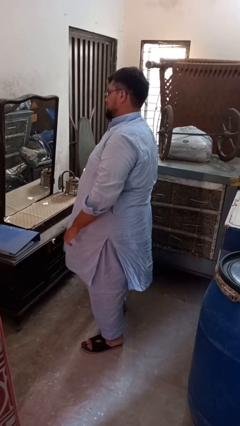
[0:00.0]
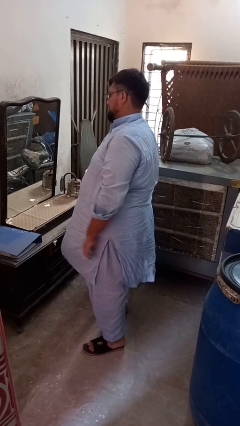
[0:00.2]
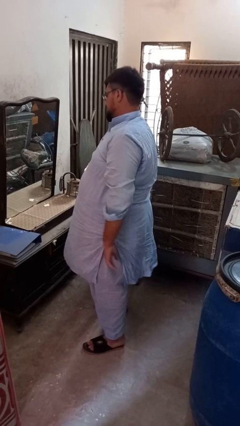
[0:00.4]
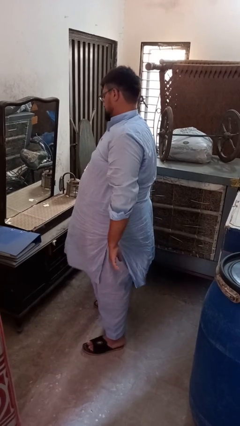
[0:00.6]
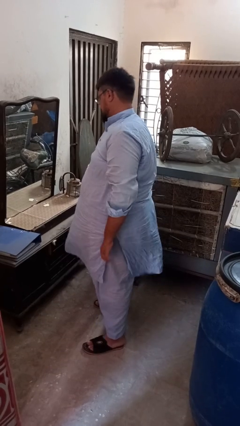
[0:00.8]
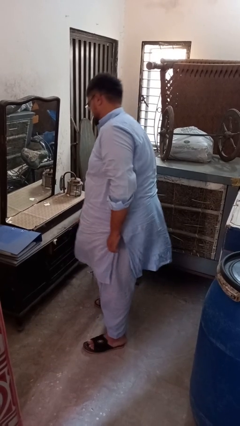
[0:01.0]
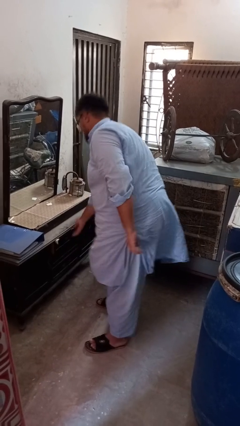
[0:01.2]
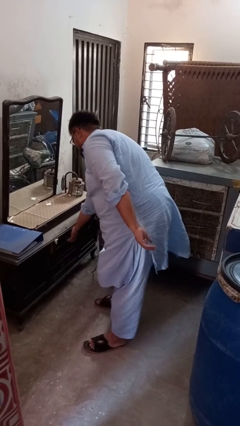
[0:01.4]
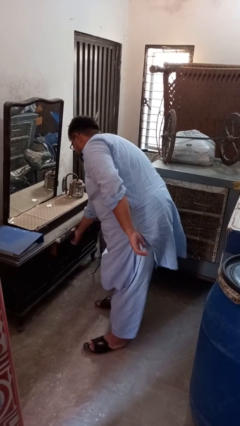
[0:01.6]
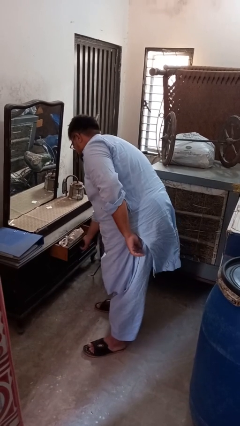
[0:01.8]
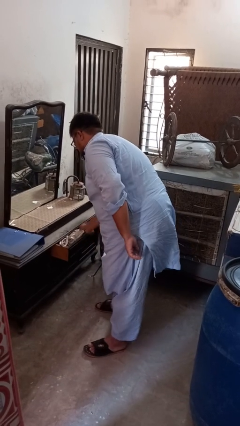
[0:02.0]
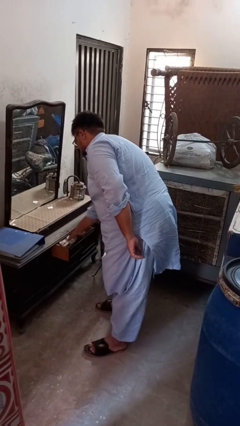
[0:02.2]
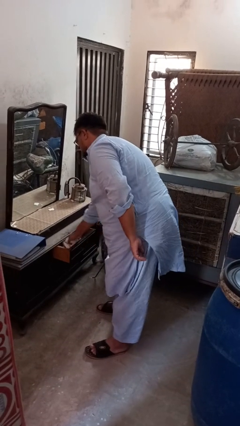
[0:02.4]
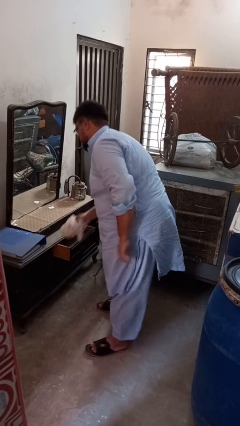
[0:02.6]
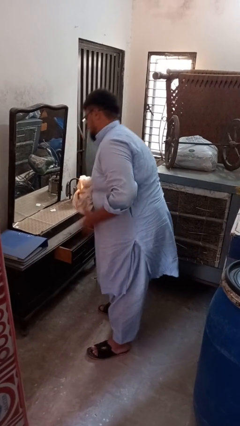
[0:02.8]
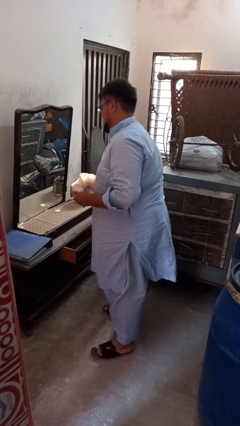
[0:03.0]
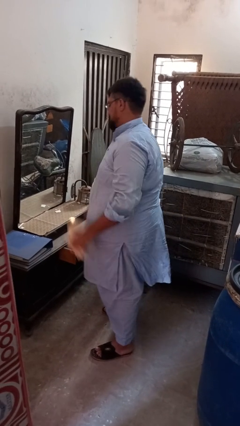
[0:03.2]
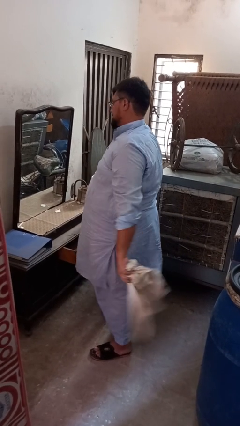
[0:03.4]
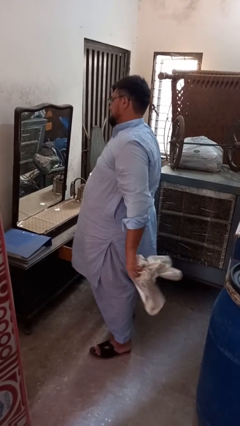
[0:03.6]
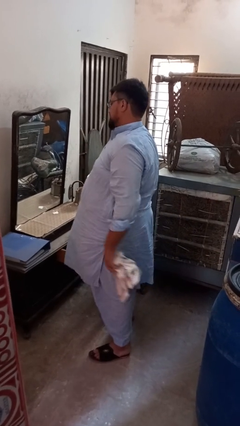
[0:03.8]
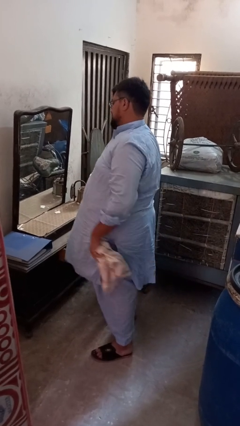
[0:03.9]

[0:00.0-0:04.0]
person takes clothes from dresser

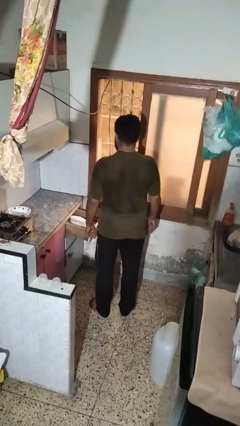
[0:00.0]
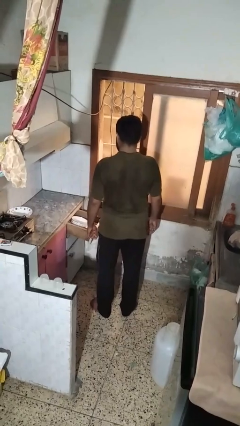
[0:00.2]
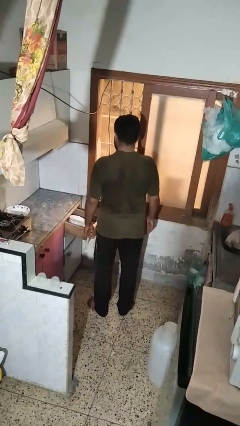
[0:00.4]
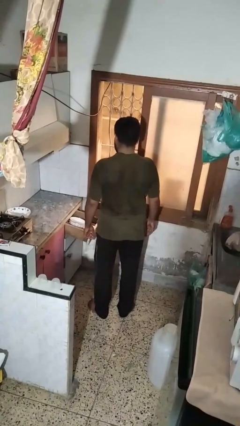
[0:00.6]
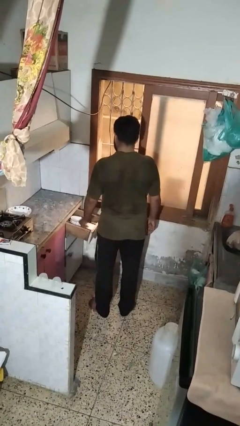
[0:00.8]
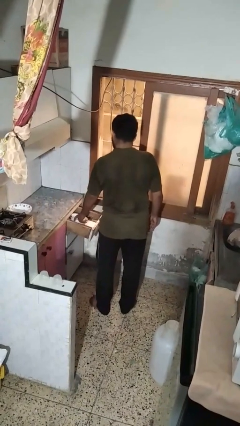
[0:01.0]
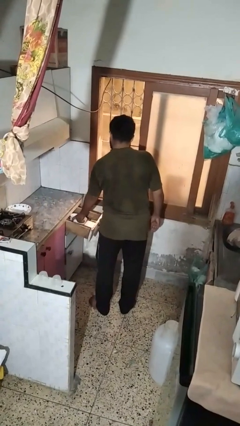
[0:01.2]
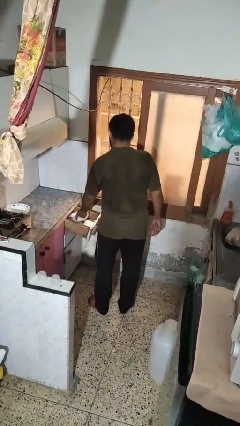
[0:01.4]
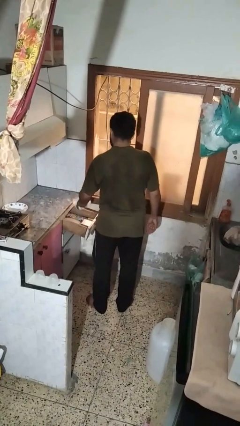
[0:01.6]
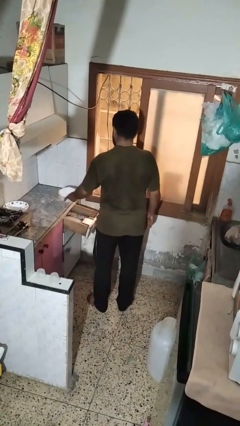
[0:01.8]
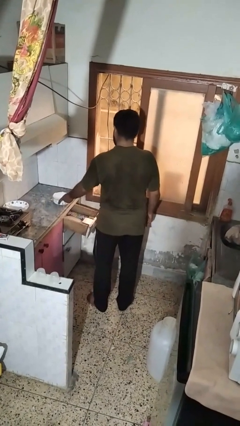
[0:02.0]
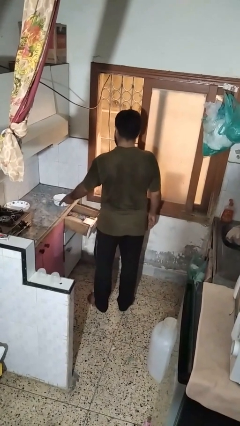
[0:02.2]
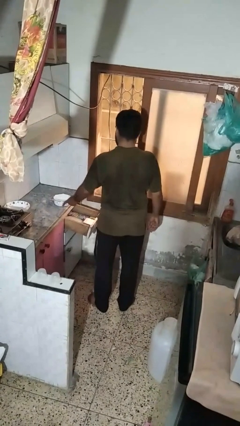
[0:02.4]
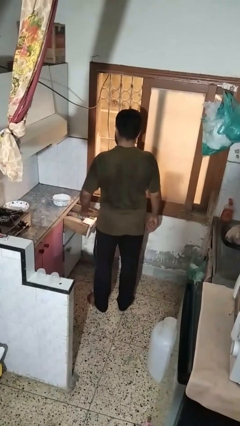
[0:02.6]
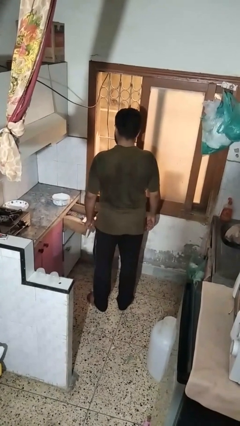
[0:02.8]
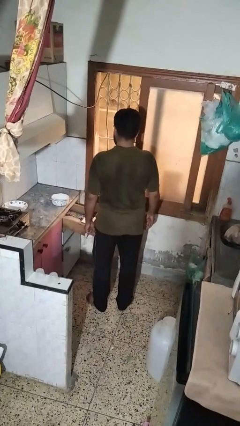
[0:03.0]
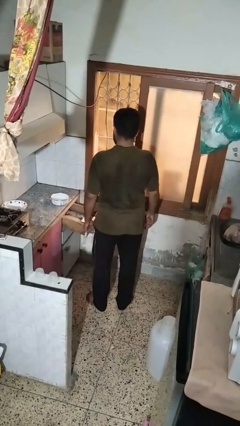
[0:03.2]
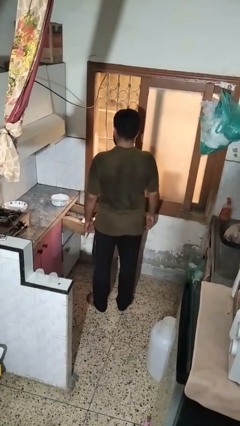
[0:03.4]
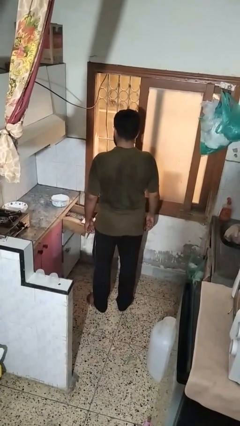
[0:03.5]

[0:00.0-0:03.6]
person takes object from kitchen drawer

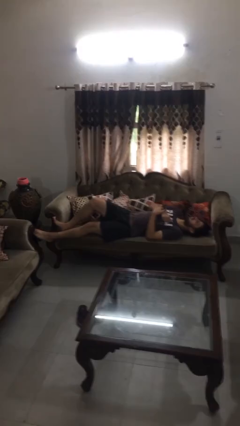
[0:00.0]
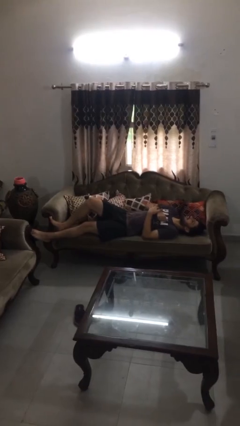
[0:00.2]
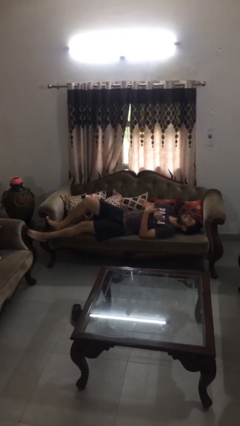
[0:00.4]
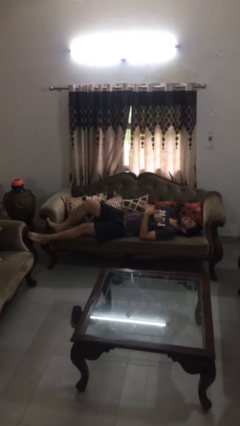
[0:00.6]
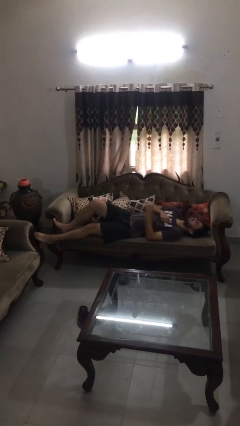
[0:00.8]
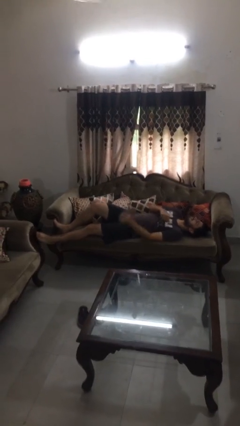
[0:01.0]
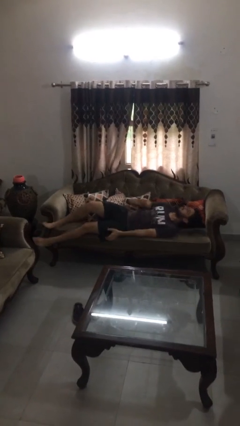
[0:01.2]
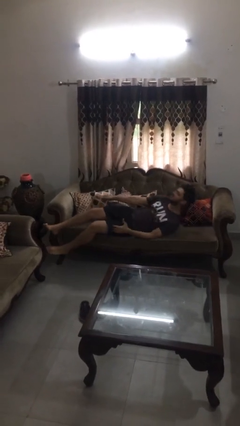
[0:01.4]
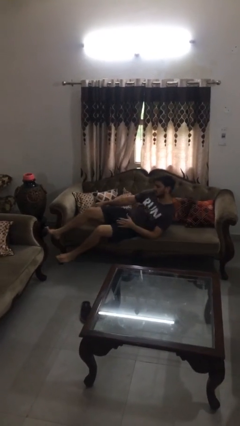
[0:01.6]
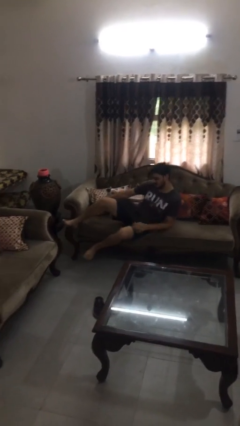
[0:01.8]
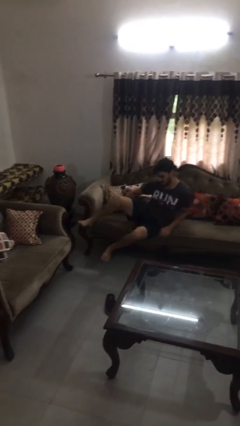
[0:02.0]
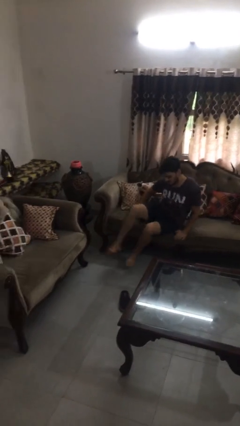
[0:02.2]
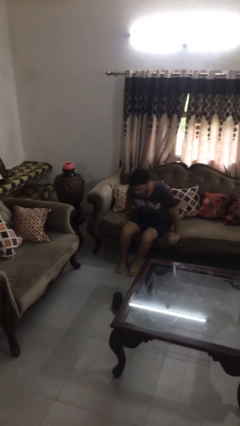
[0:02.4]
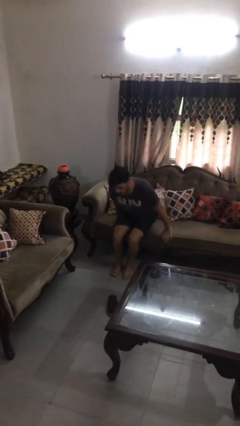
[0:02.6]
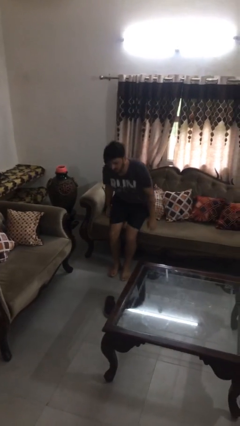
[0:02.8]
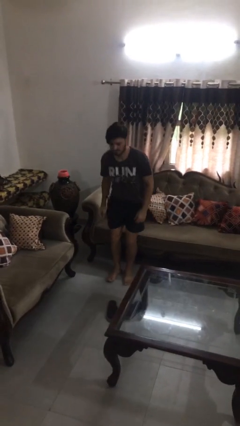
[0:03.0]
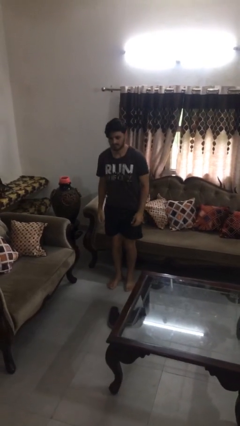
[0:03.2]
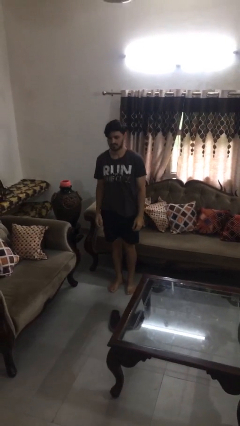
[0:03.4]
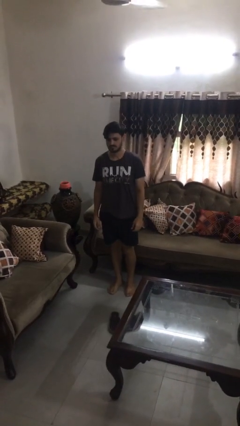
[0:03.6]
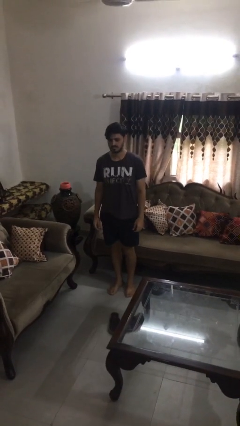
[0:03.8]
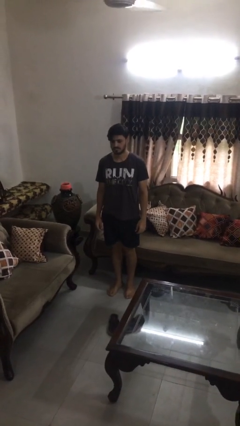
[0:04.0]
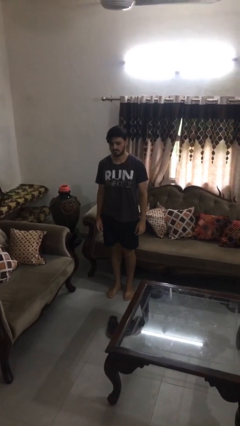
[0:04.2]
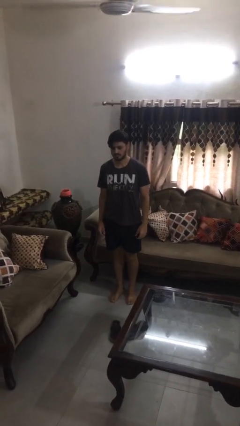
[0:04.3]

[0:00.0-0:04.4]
person stands up

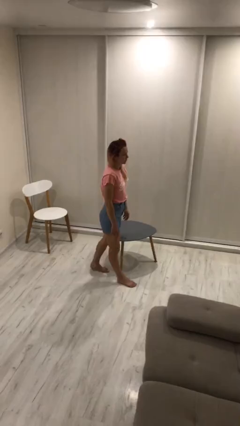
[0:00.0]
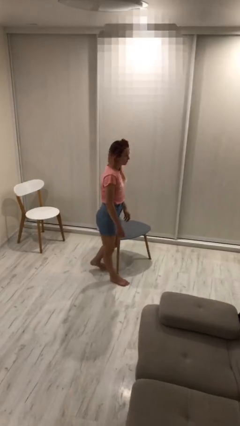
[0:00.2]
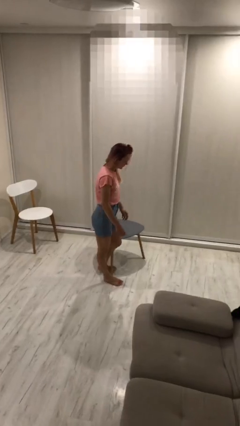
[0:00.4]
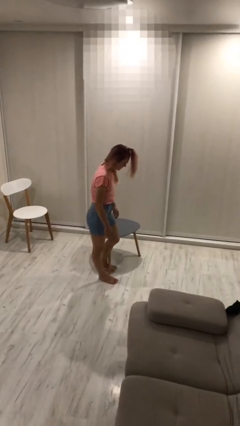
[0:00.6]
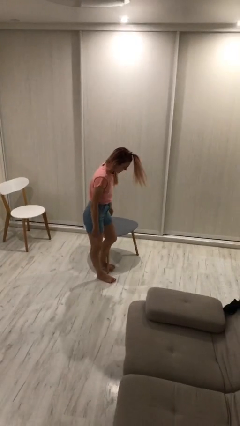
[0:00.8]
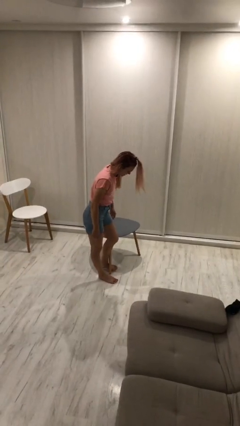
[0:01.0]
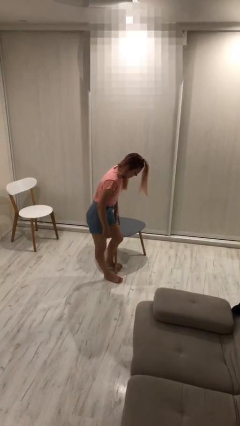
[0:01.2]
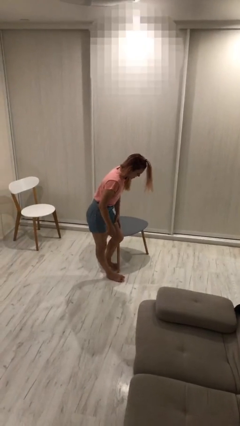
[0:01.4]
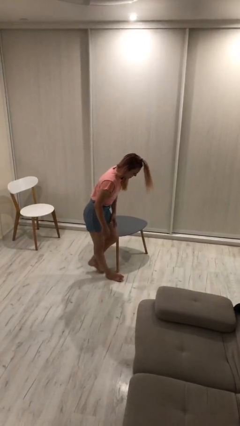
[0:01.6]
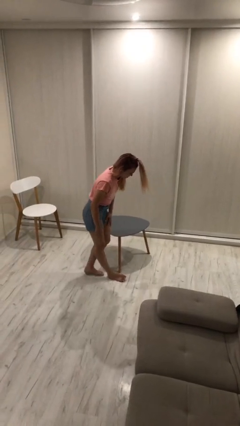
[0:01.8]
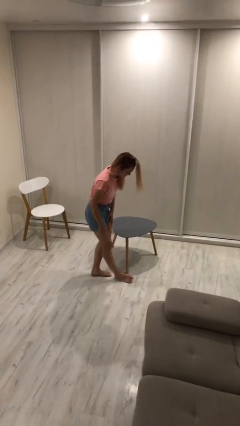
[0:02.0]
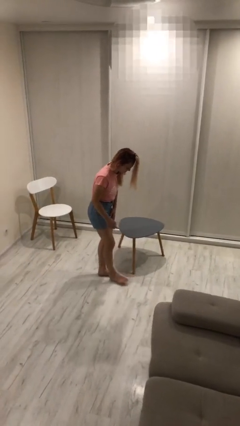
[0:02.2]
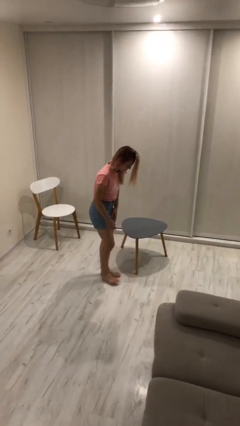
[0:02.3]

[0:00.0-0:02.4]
person stubs toe

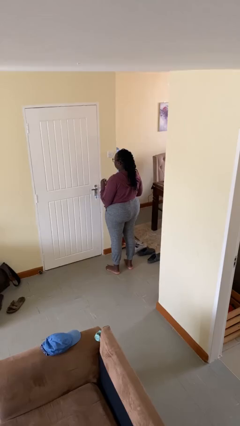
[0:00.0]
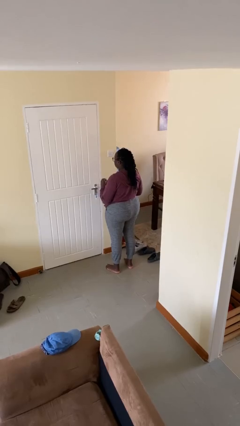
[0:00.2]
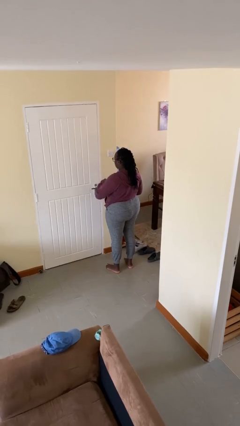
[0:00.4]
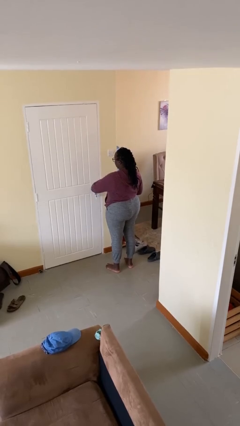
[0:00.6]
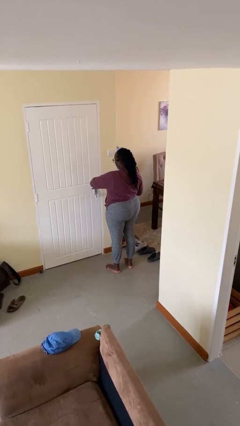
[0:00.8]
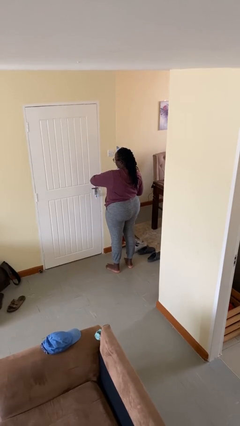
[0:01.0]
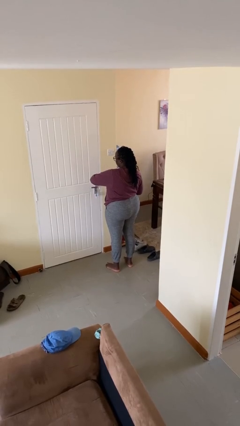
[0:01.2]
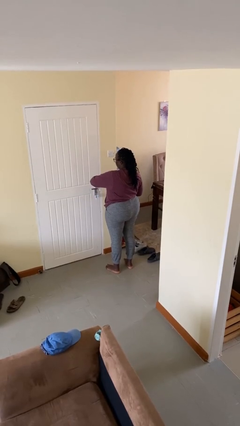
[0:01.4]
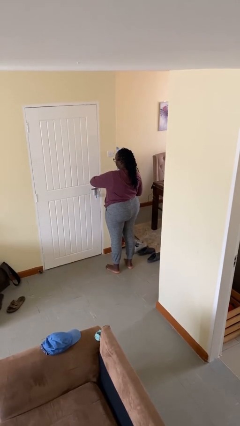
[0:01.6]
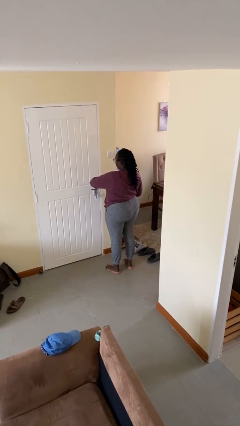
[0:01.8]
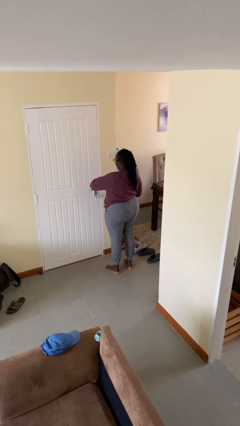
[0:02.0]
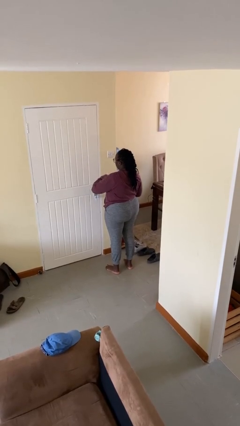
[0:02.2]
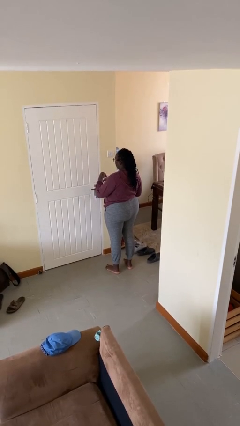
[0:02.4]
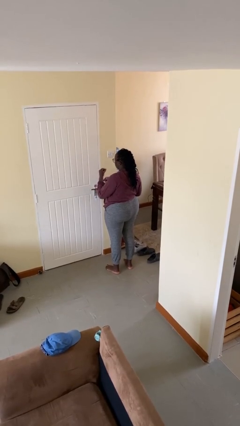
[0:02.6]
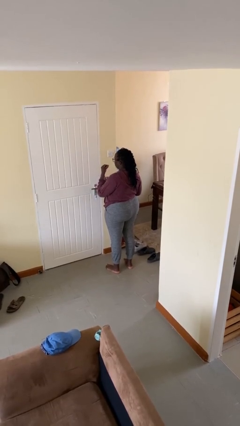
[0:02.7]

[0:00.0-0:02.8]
person eats snack from bag

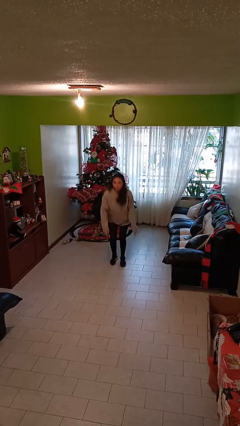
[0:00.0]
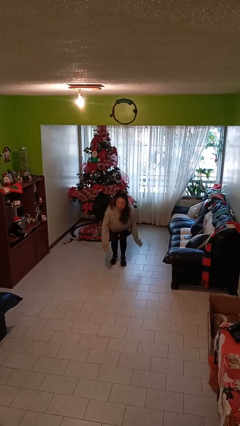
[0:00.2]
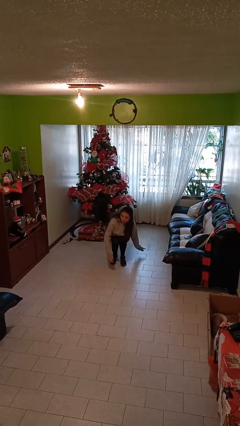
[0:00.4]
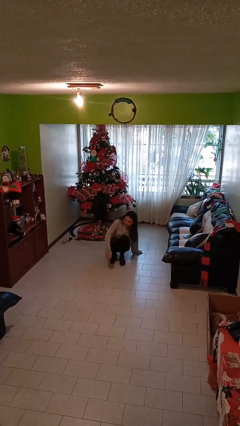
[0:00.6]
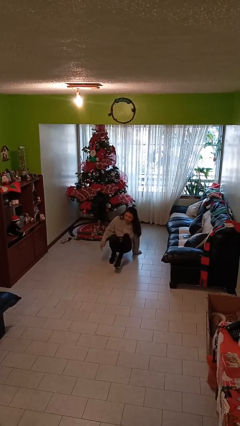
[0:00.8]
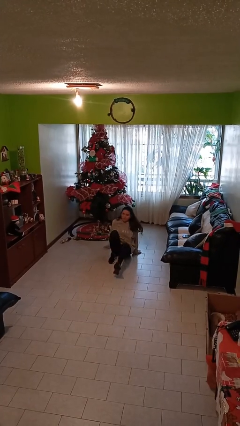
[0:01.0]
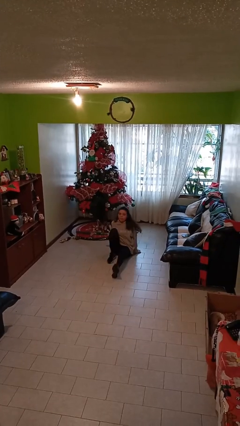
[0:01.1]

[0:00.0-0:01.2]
person sits down
